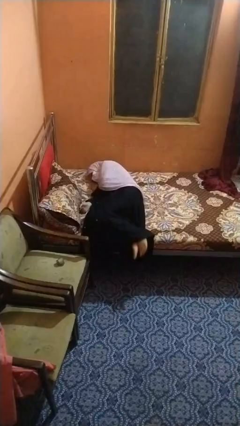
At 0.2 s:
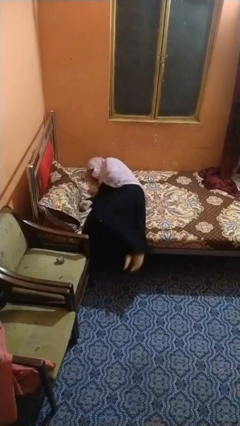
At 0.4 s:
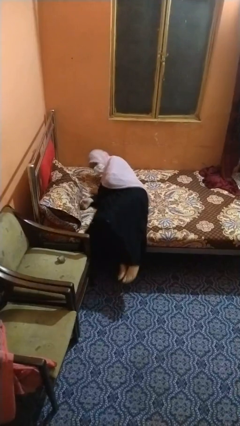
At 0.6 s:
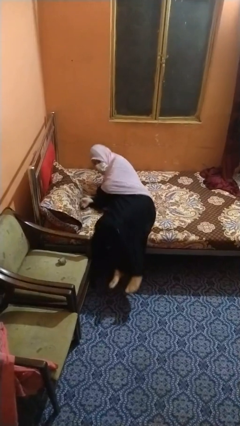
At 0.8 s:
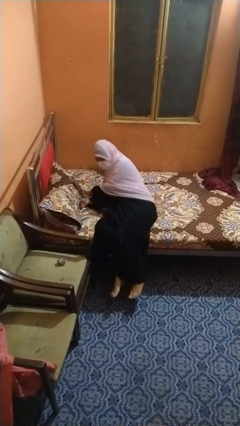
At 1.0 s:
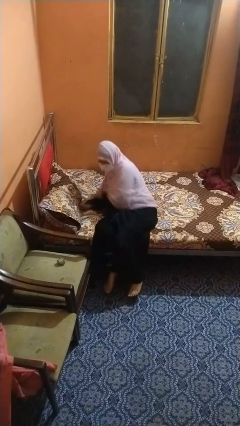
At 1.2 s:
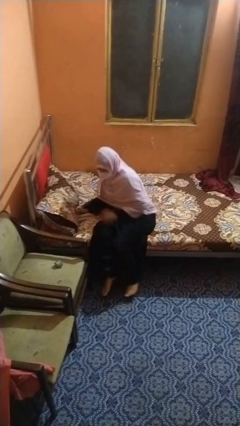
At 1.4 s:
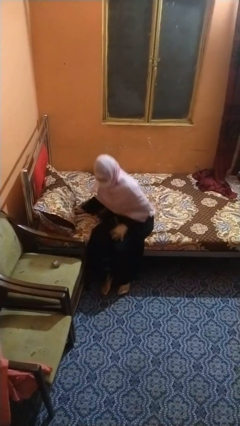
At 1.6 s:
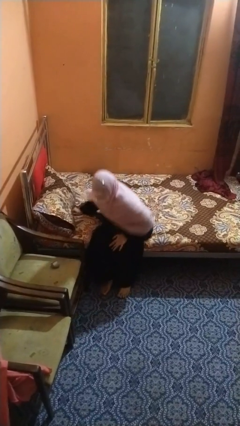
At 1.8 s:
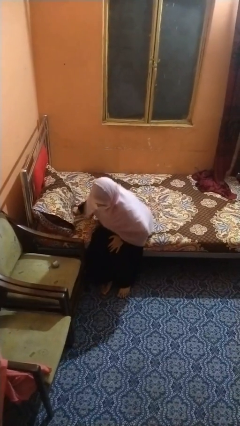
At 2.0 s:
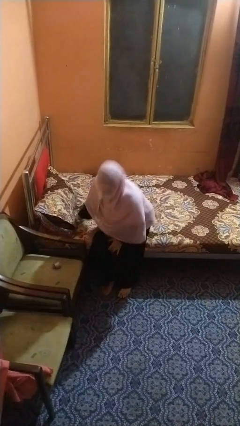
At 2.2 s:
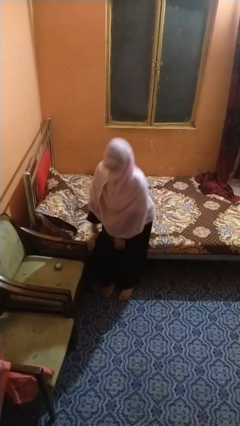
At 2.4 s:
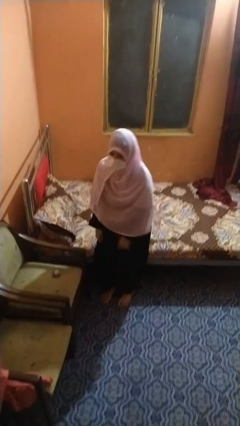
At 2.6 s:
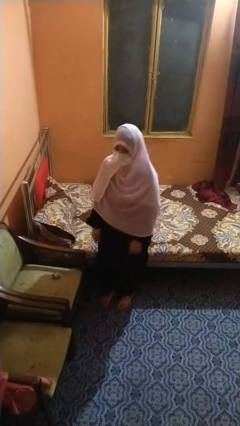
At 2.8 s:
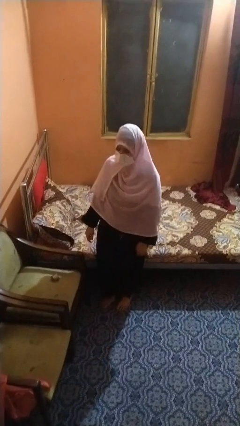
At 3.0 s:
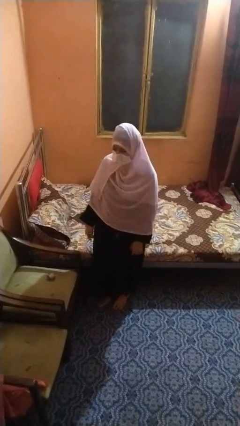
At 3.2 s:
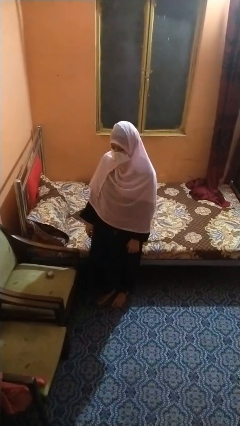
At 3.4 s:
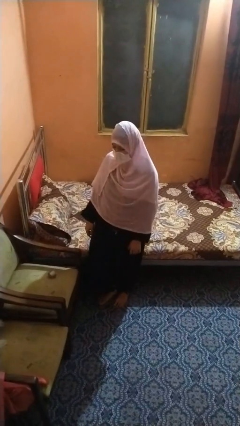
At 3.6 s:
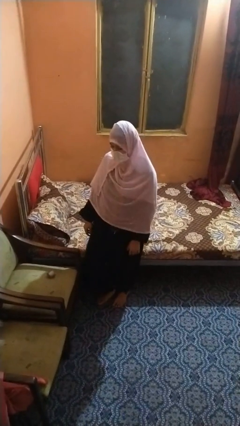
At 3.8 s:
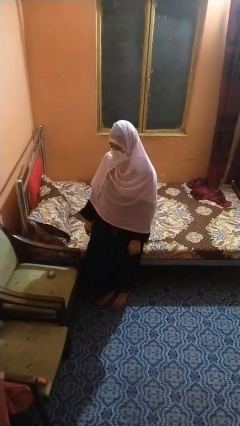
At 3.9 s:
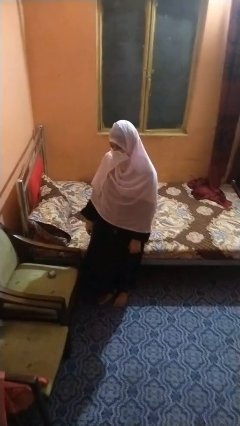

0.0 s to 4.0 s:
person stands up

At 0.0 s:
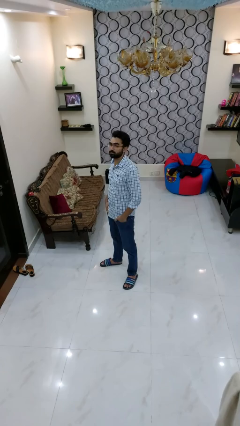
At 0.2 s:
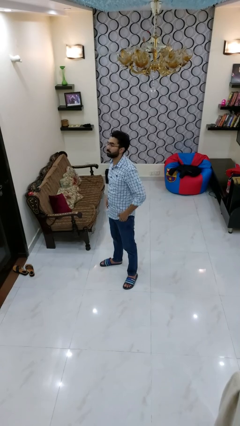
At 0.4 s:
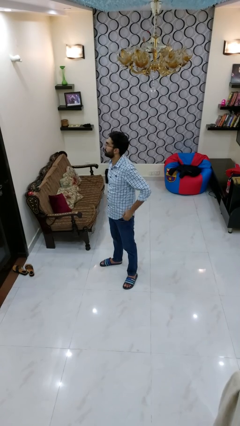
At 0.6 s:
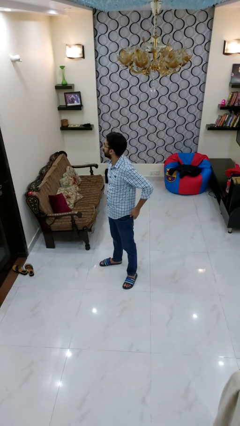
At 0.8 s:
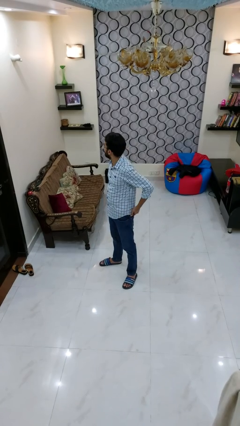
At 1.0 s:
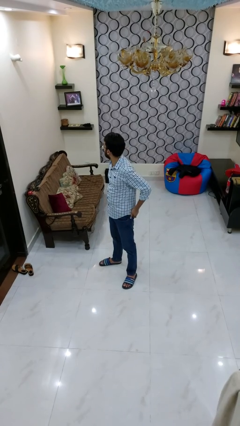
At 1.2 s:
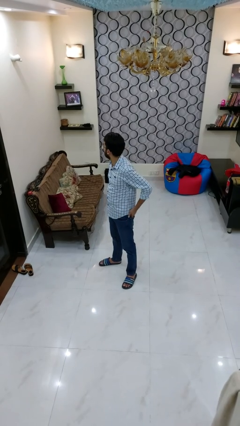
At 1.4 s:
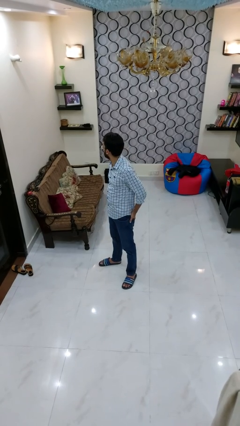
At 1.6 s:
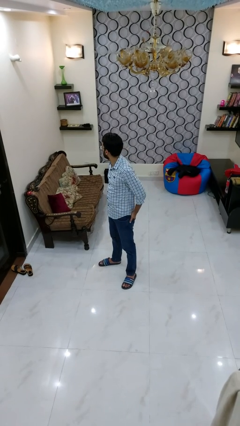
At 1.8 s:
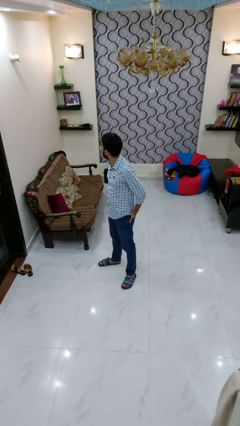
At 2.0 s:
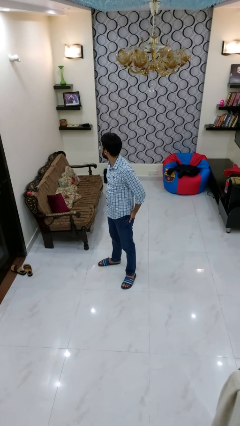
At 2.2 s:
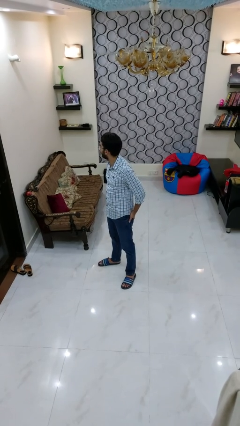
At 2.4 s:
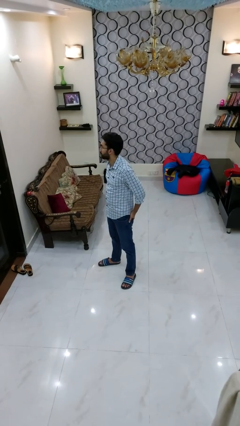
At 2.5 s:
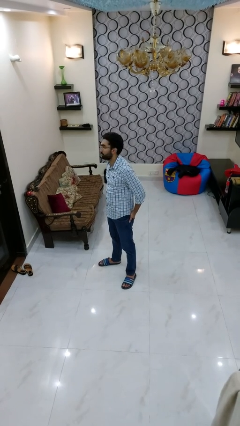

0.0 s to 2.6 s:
person puts hands in back pockets

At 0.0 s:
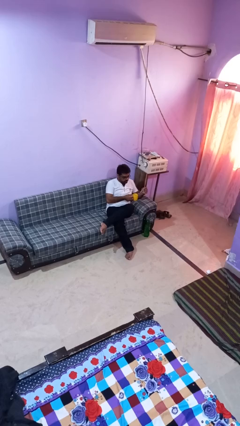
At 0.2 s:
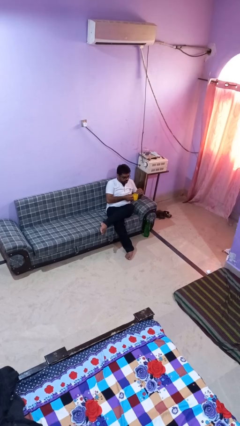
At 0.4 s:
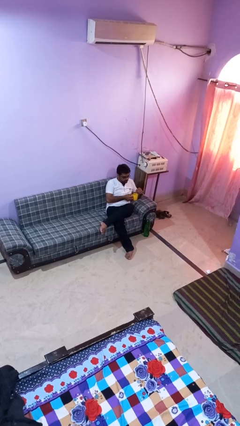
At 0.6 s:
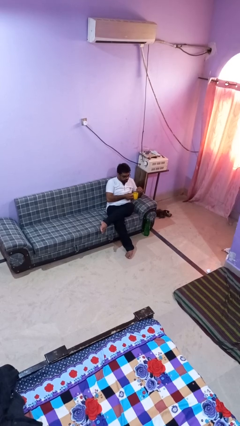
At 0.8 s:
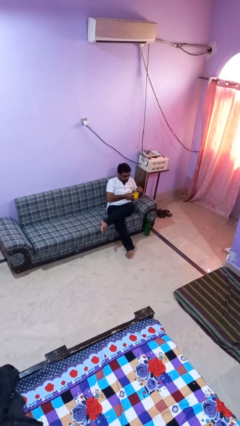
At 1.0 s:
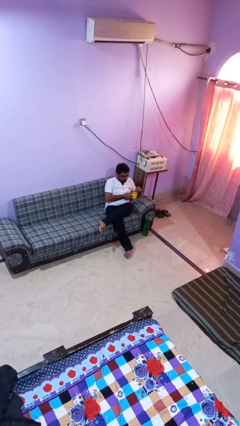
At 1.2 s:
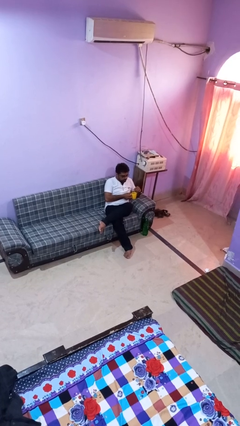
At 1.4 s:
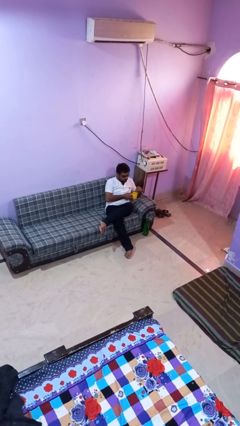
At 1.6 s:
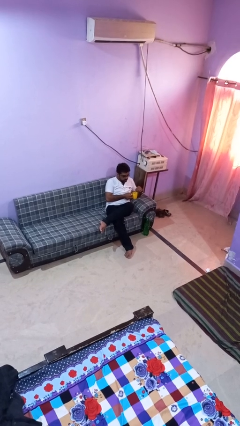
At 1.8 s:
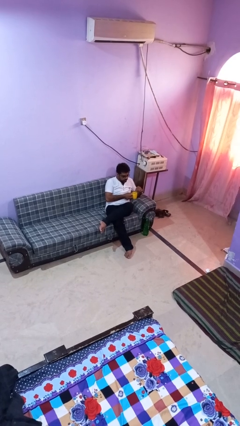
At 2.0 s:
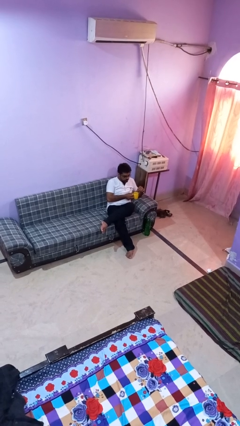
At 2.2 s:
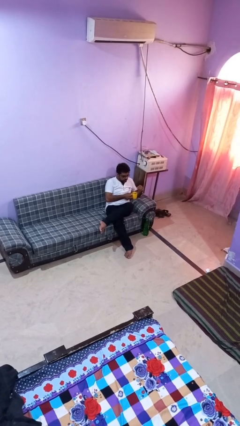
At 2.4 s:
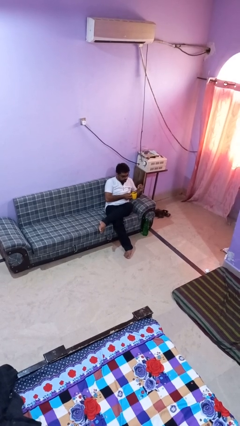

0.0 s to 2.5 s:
person stirs mug

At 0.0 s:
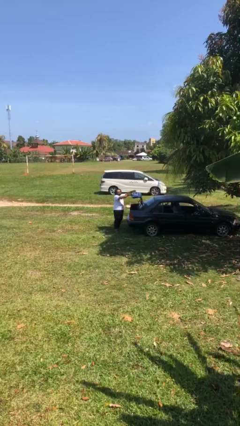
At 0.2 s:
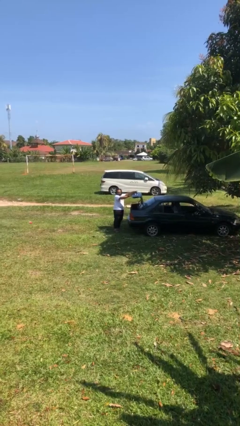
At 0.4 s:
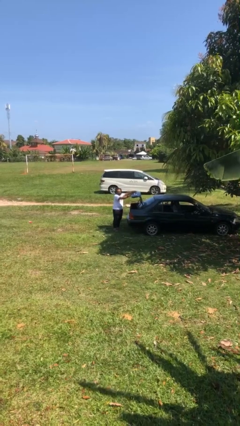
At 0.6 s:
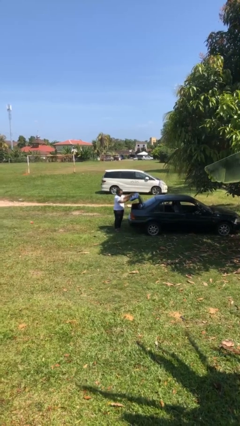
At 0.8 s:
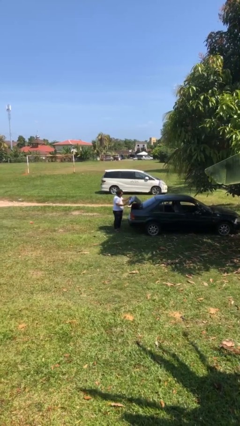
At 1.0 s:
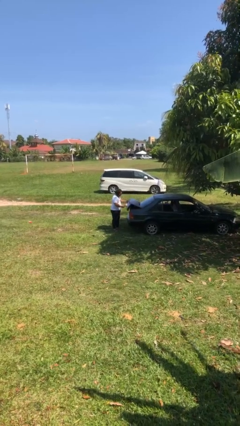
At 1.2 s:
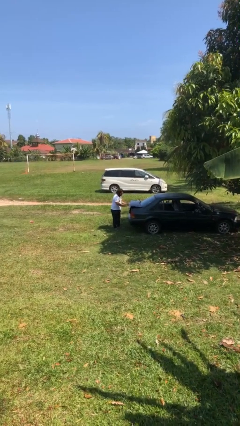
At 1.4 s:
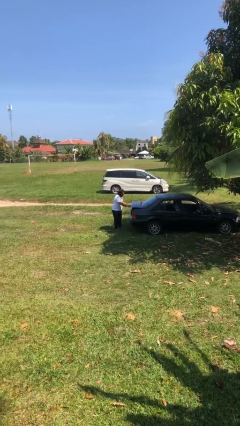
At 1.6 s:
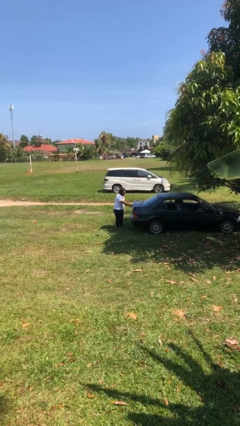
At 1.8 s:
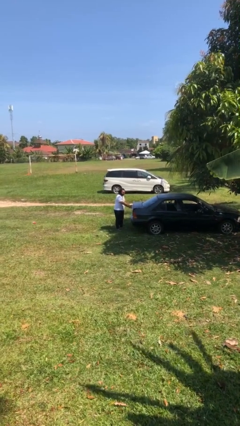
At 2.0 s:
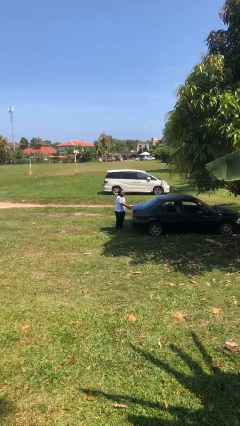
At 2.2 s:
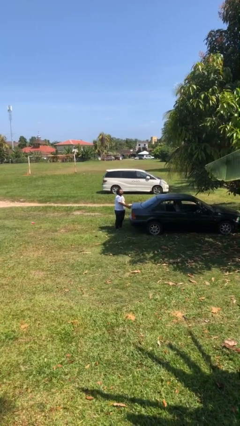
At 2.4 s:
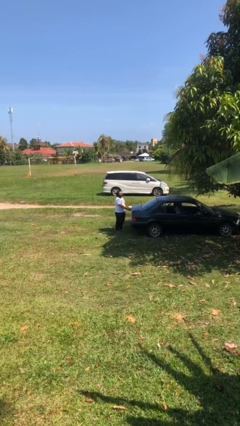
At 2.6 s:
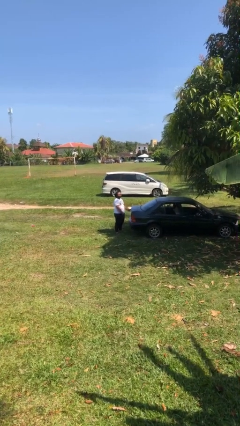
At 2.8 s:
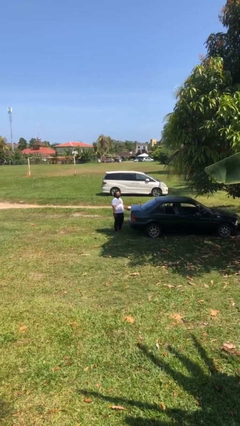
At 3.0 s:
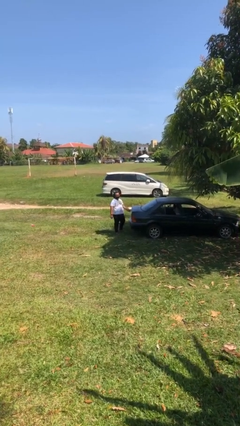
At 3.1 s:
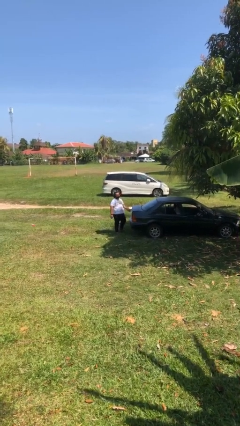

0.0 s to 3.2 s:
person closes car trunk

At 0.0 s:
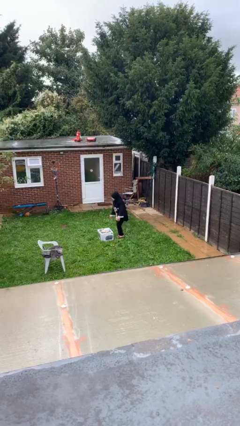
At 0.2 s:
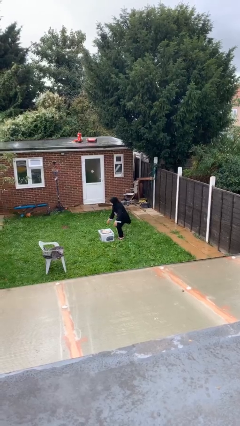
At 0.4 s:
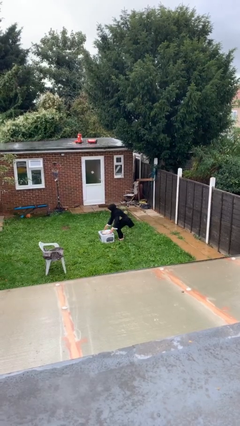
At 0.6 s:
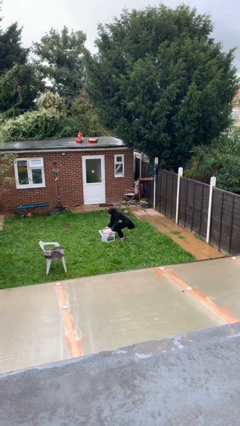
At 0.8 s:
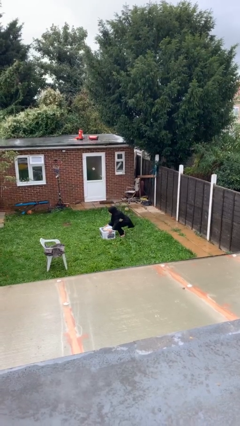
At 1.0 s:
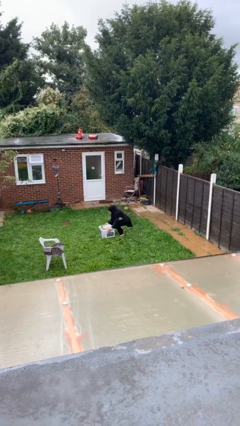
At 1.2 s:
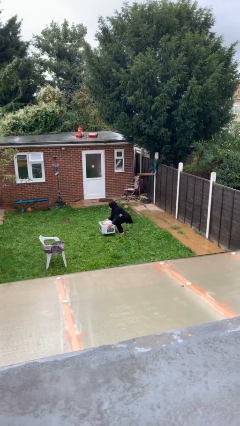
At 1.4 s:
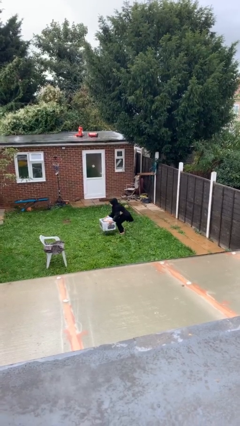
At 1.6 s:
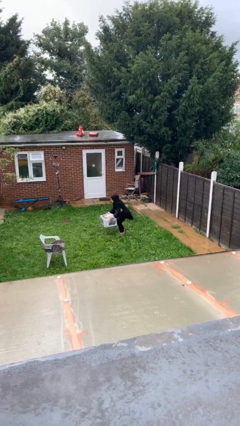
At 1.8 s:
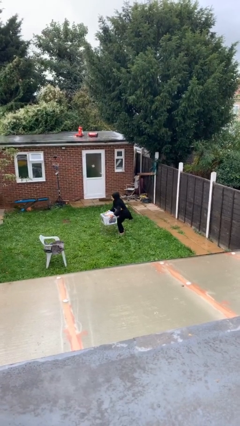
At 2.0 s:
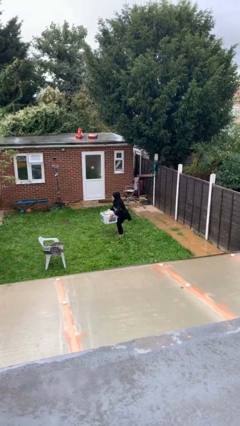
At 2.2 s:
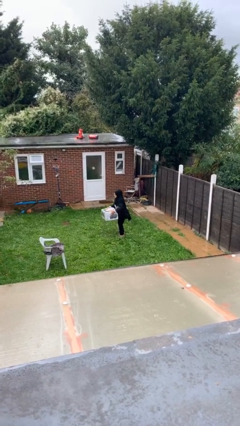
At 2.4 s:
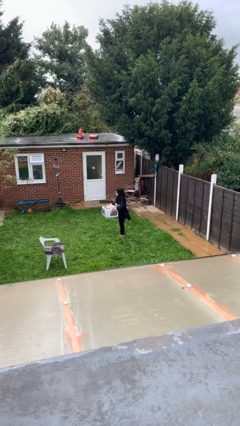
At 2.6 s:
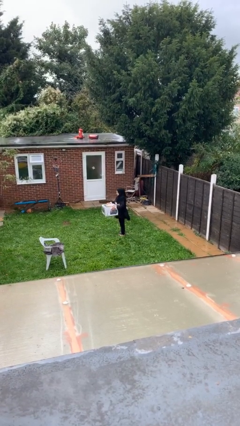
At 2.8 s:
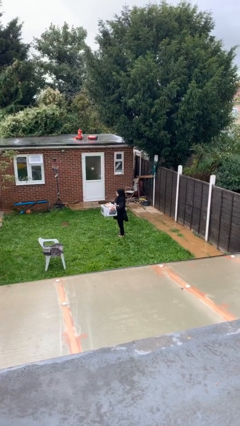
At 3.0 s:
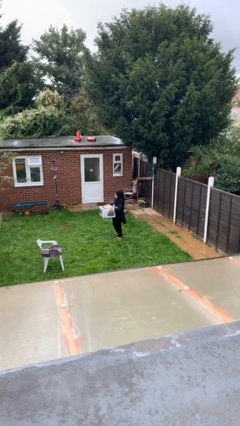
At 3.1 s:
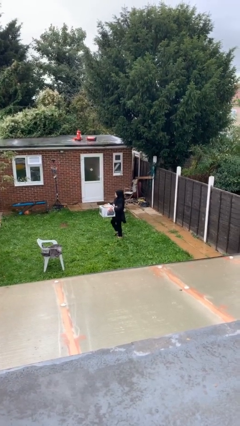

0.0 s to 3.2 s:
person picks up object from floor

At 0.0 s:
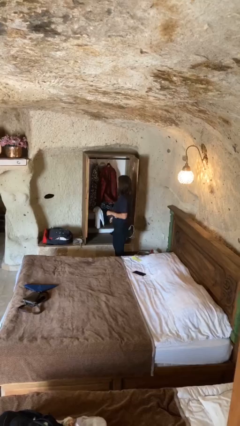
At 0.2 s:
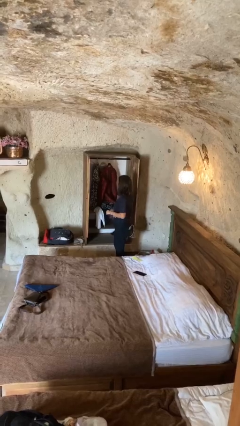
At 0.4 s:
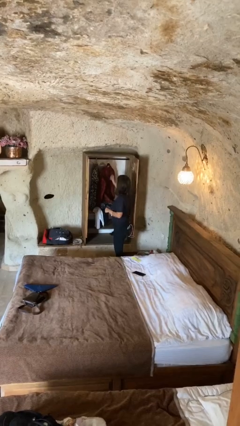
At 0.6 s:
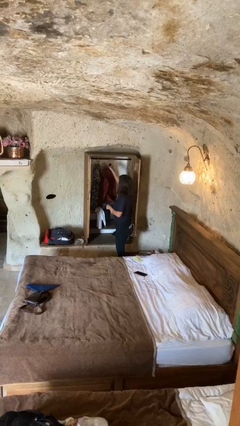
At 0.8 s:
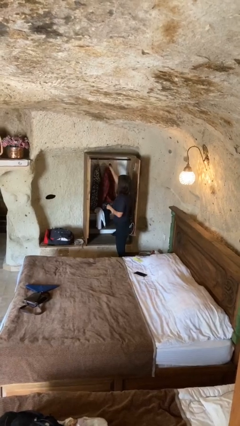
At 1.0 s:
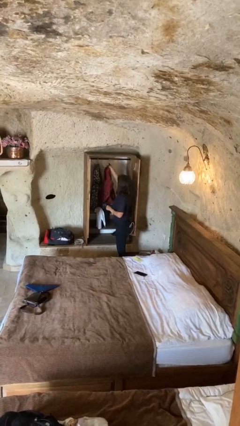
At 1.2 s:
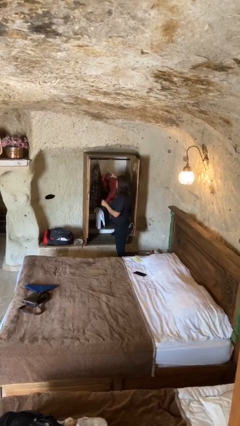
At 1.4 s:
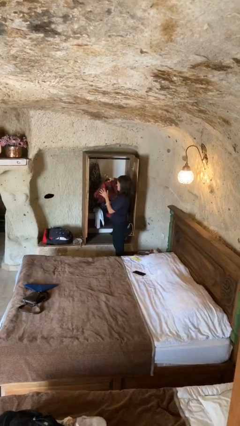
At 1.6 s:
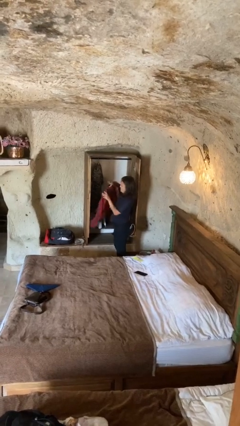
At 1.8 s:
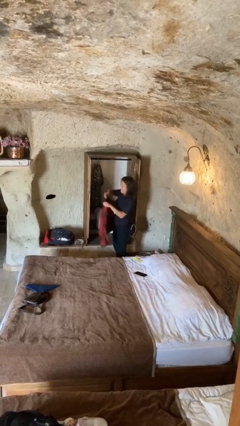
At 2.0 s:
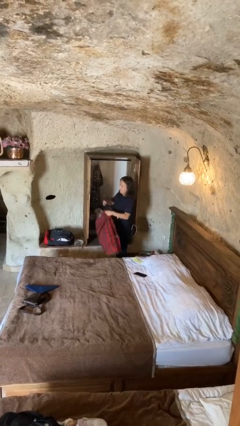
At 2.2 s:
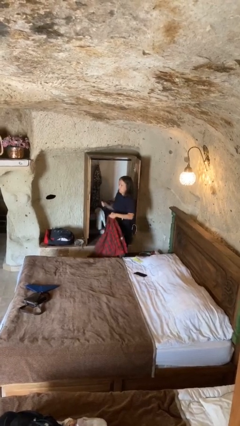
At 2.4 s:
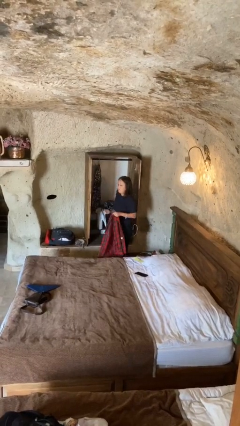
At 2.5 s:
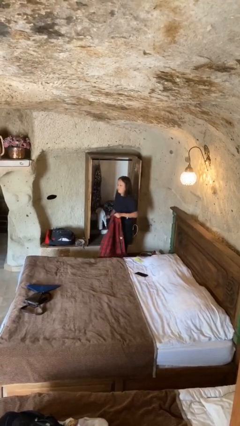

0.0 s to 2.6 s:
person takes clothes from closet
